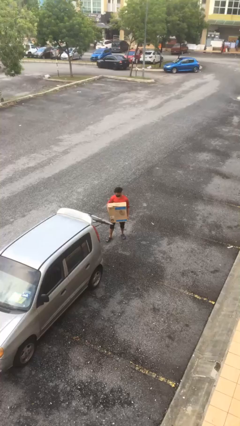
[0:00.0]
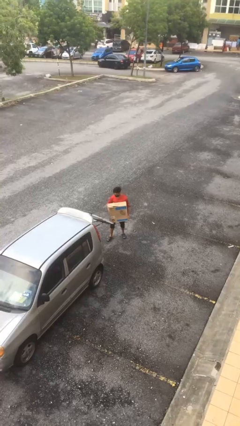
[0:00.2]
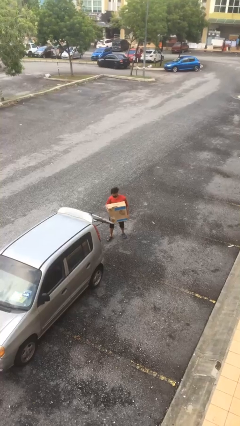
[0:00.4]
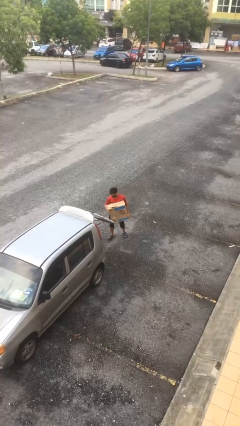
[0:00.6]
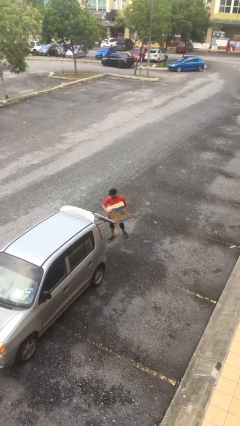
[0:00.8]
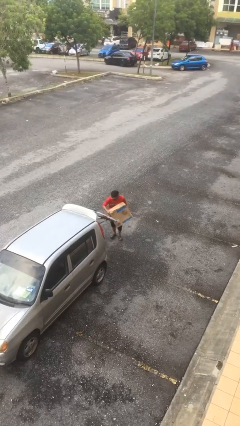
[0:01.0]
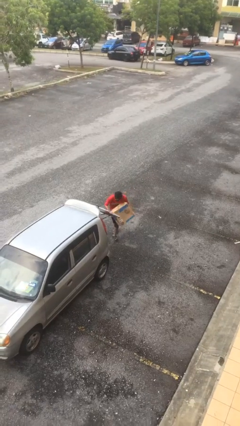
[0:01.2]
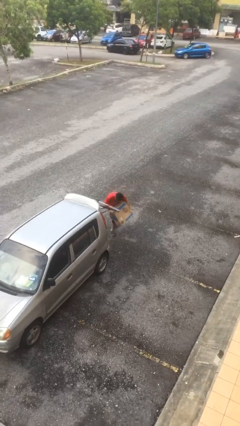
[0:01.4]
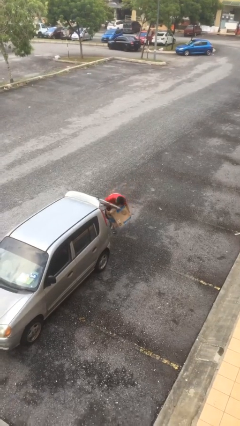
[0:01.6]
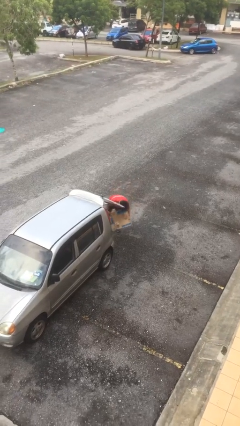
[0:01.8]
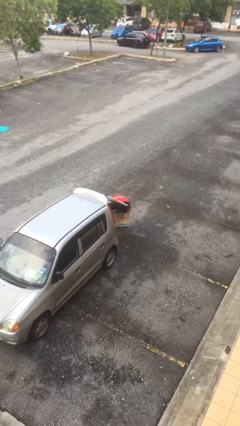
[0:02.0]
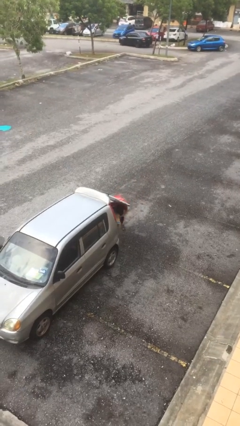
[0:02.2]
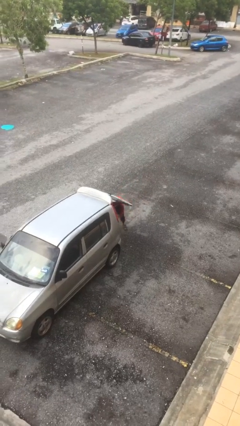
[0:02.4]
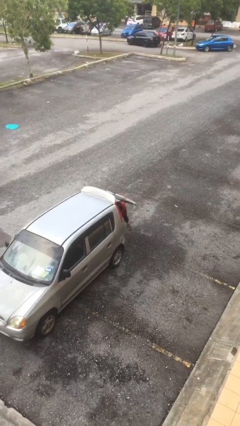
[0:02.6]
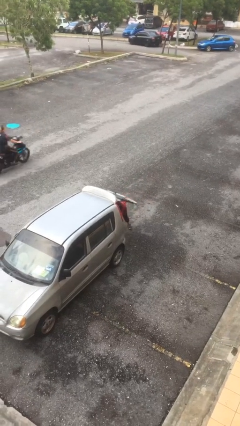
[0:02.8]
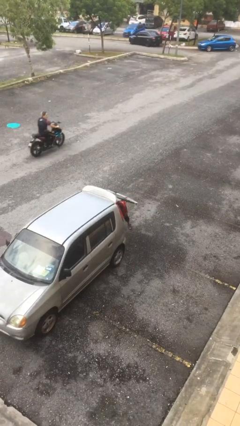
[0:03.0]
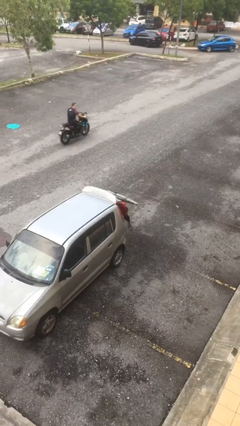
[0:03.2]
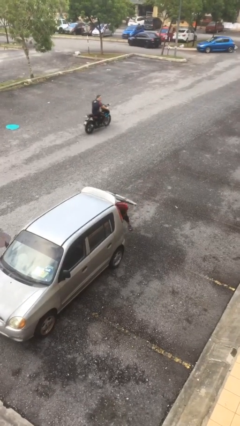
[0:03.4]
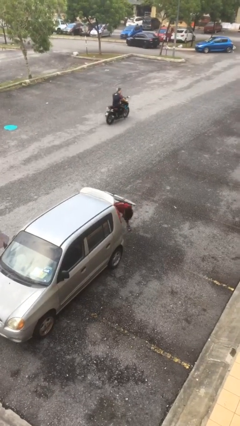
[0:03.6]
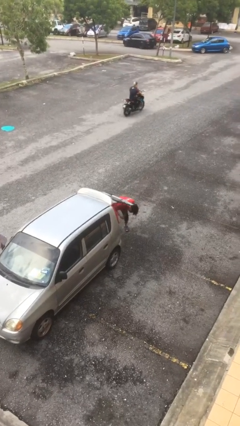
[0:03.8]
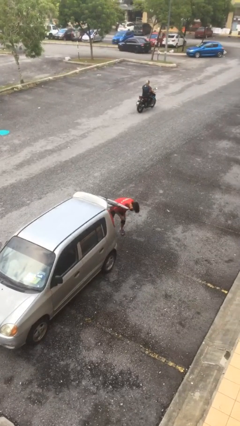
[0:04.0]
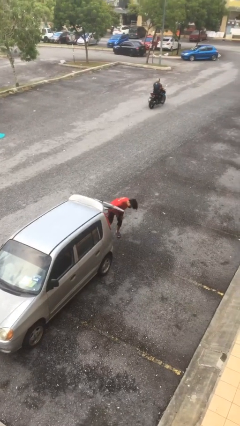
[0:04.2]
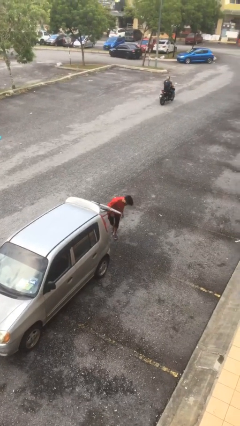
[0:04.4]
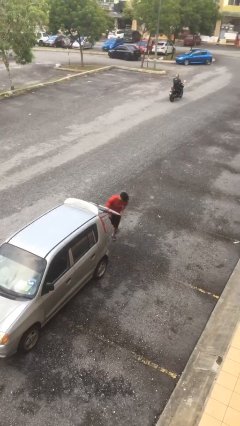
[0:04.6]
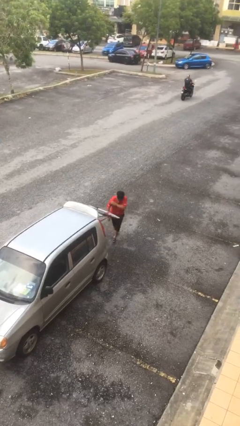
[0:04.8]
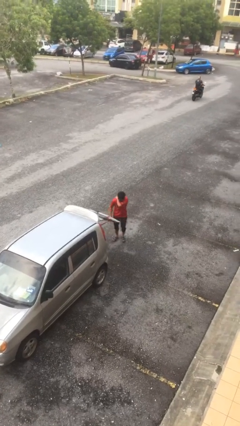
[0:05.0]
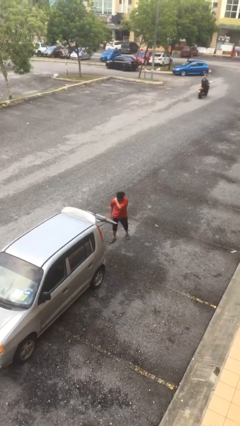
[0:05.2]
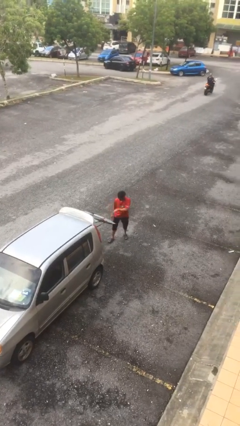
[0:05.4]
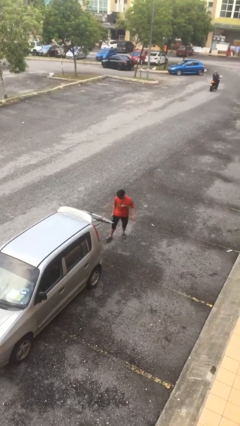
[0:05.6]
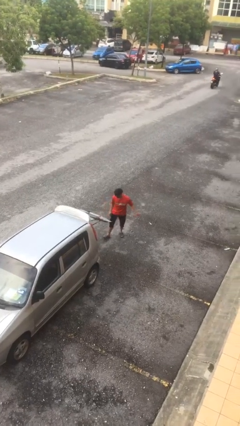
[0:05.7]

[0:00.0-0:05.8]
person loads car

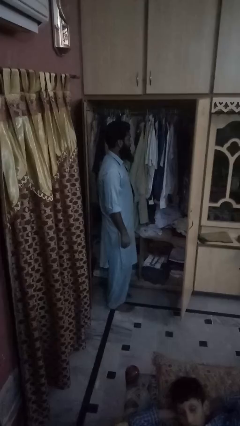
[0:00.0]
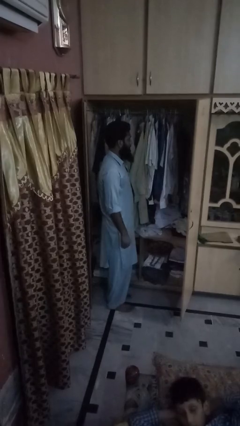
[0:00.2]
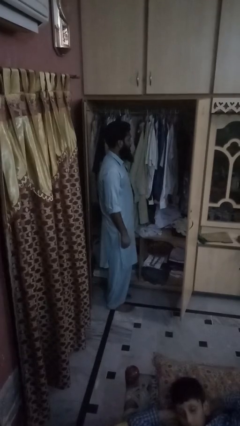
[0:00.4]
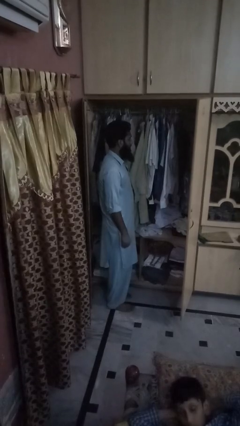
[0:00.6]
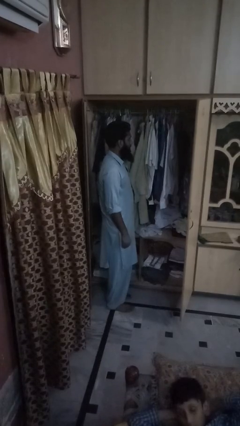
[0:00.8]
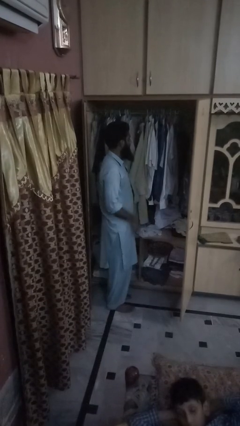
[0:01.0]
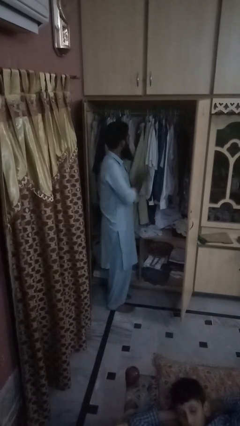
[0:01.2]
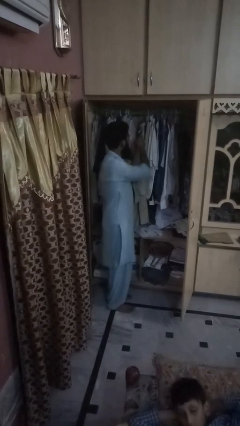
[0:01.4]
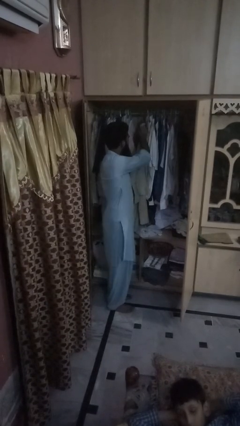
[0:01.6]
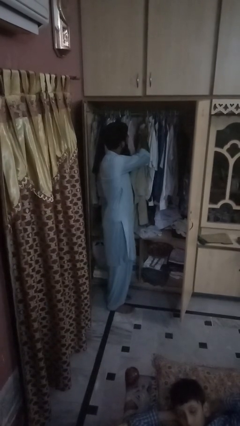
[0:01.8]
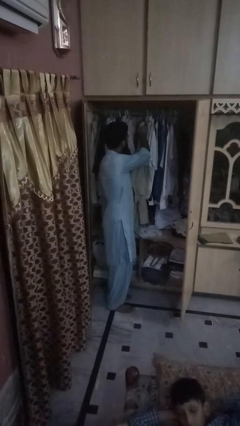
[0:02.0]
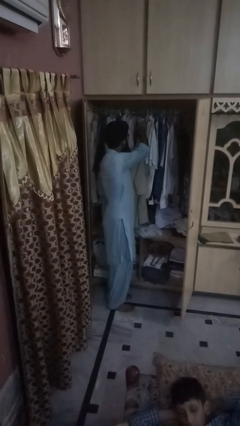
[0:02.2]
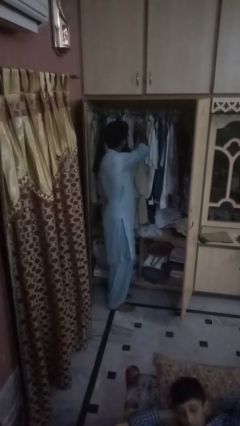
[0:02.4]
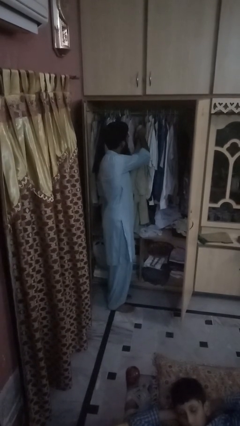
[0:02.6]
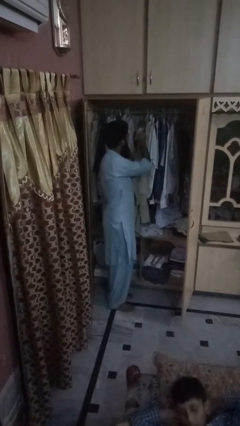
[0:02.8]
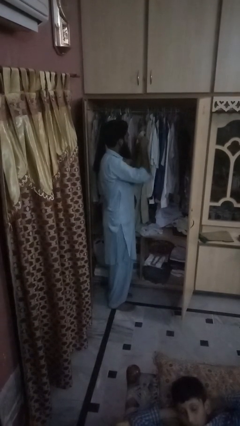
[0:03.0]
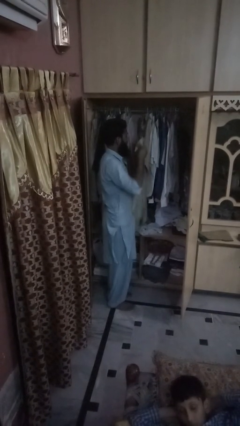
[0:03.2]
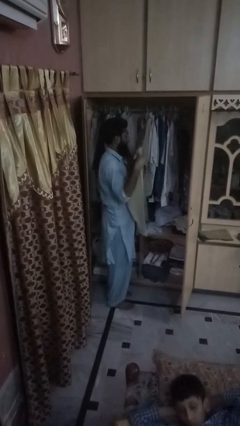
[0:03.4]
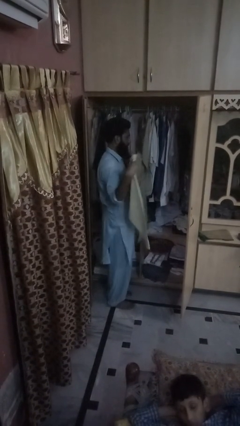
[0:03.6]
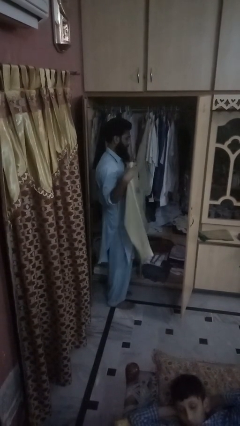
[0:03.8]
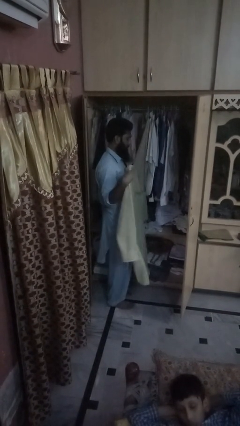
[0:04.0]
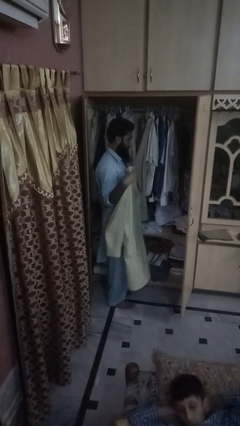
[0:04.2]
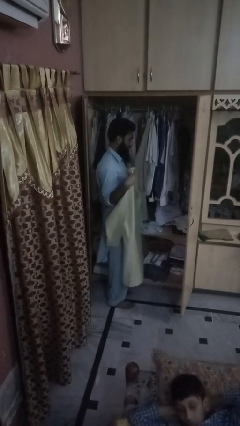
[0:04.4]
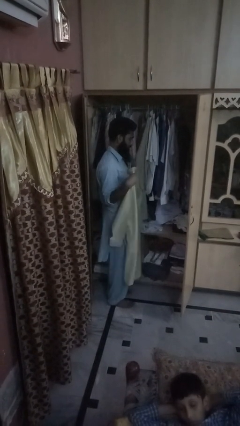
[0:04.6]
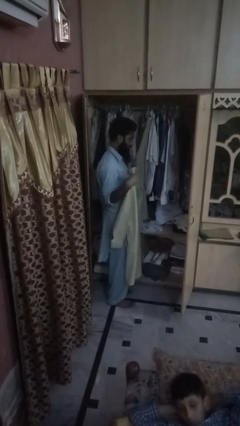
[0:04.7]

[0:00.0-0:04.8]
person puts clothes into closet

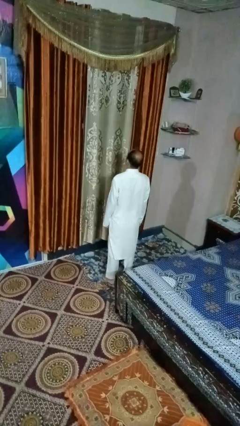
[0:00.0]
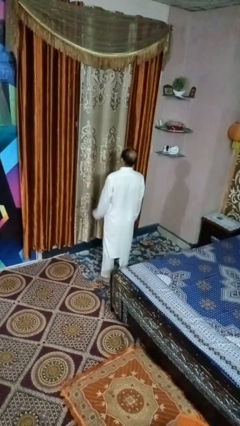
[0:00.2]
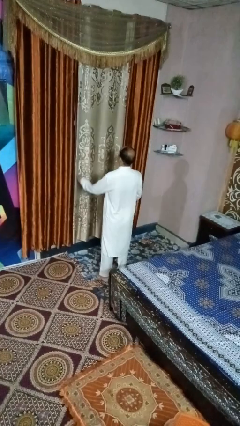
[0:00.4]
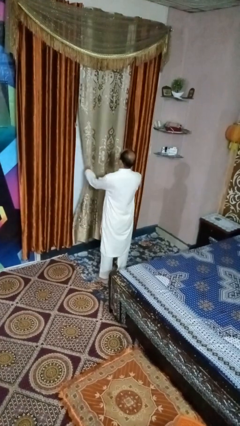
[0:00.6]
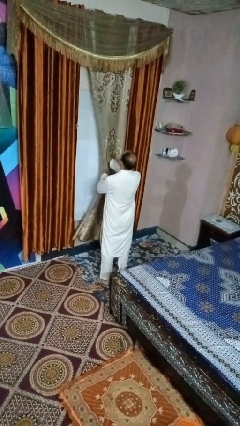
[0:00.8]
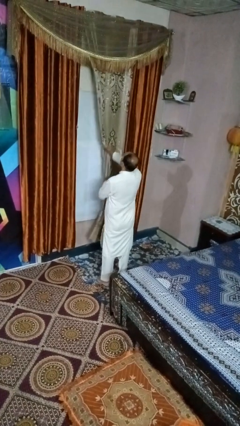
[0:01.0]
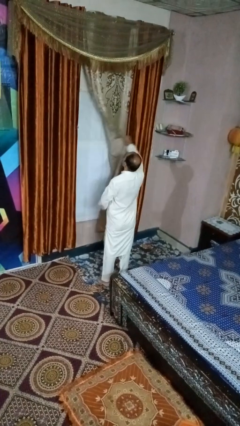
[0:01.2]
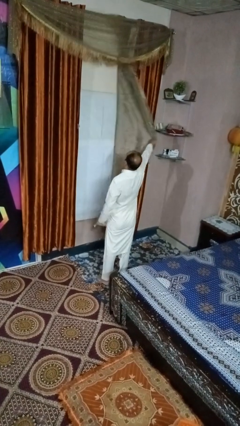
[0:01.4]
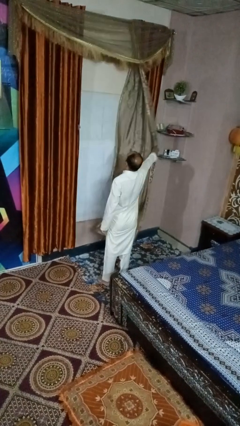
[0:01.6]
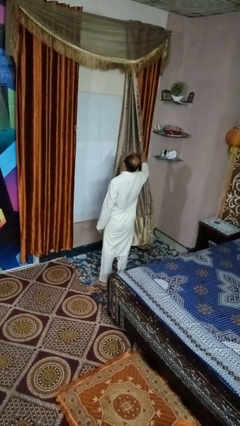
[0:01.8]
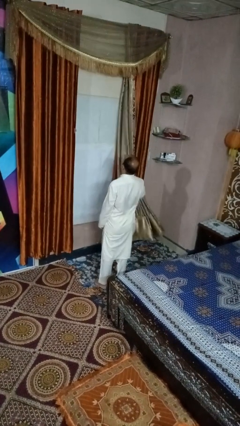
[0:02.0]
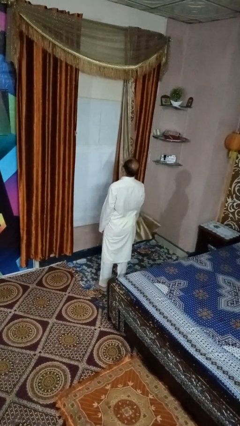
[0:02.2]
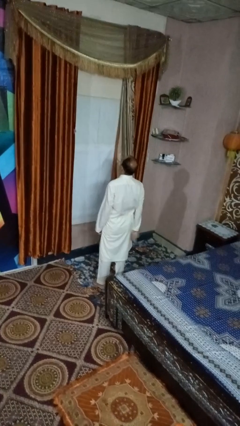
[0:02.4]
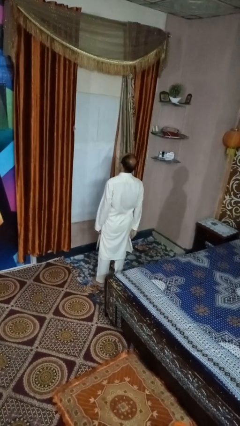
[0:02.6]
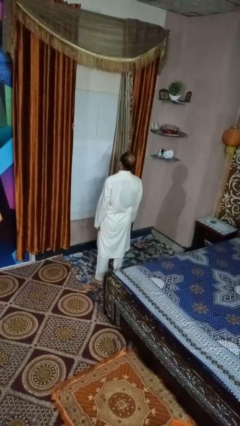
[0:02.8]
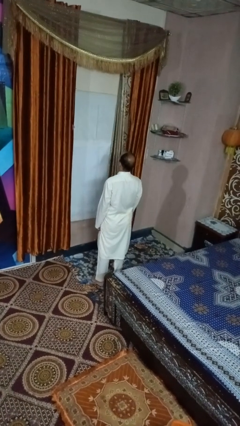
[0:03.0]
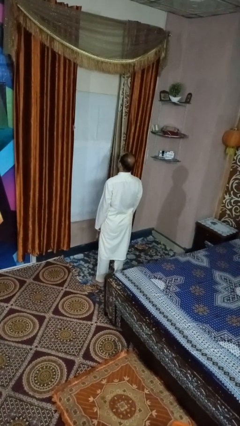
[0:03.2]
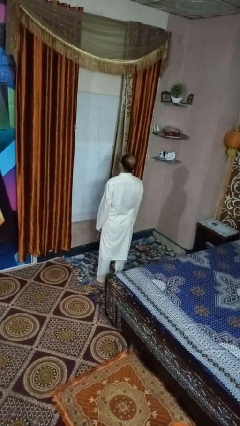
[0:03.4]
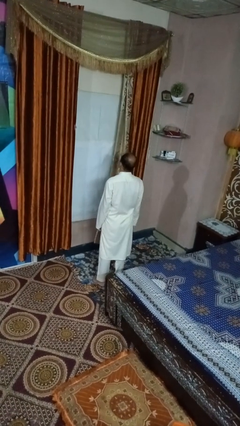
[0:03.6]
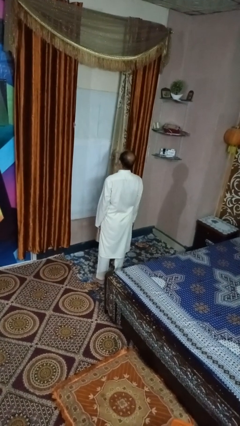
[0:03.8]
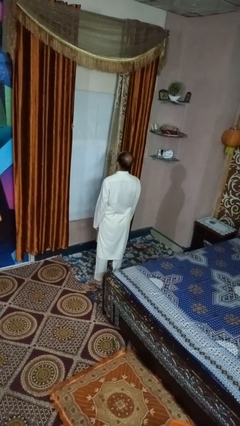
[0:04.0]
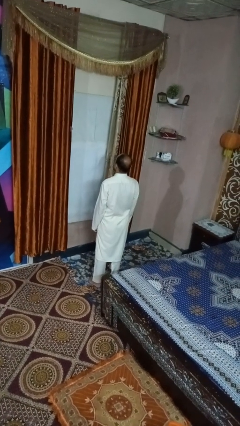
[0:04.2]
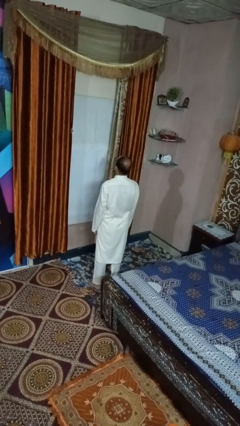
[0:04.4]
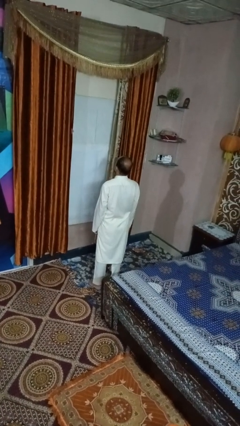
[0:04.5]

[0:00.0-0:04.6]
person opens curtains

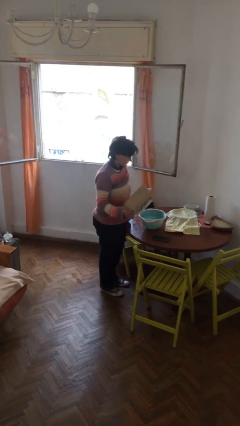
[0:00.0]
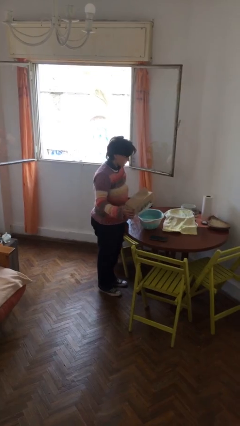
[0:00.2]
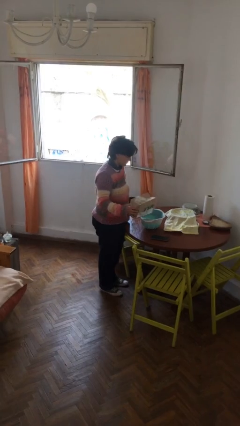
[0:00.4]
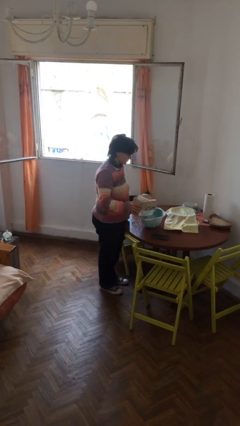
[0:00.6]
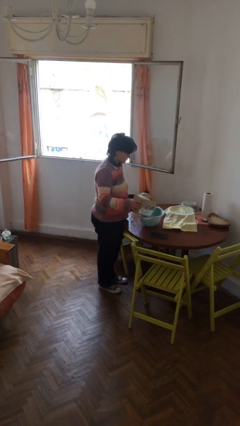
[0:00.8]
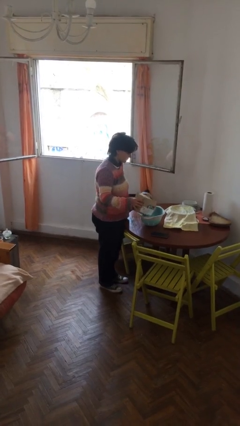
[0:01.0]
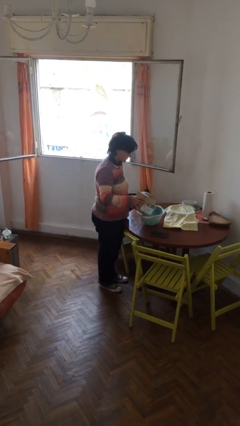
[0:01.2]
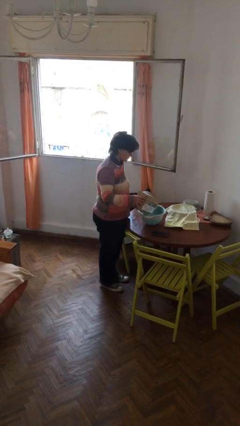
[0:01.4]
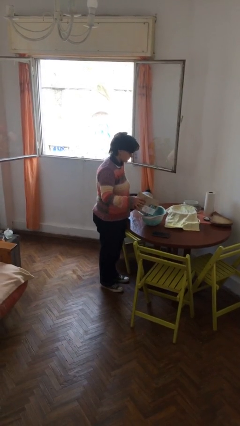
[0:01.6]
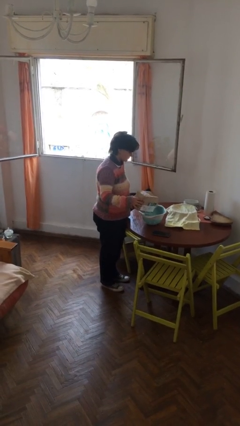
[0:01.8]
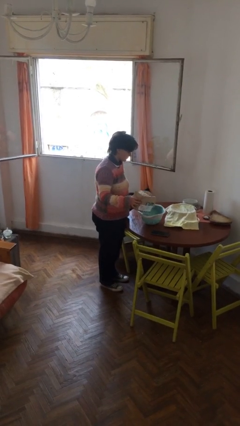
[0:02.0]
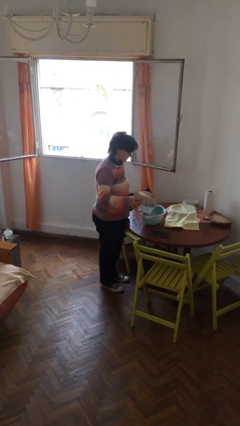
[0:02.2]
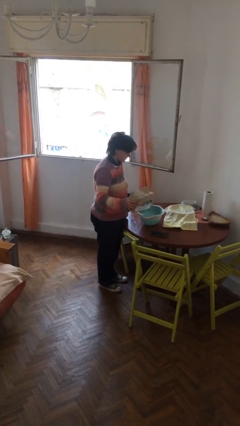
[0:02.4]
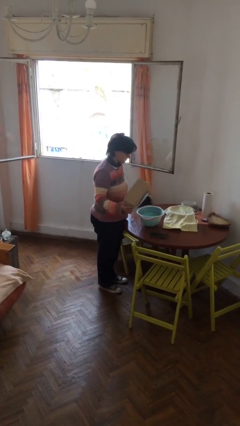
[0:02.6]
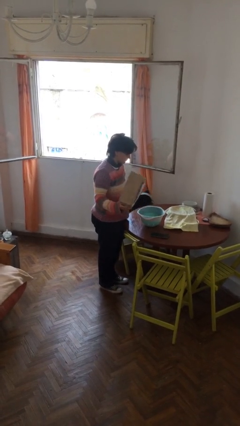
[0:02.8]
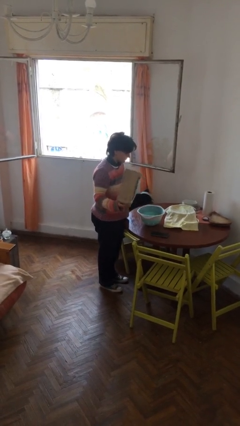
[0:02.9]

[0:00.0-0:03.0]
person pours into bowl
